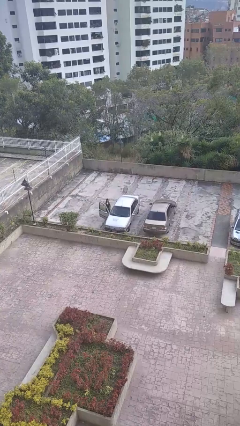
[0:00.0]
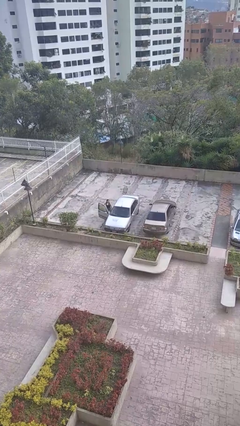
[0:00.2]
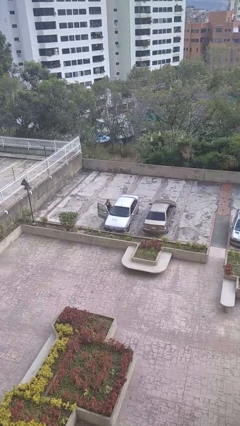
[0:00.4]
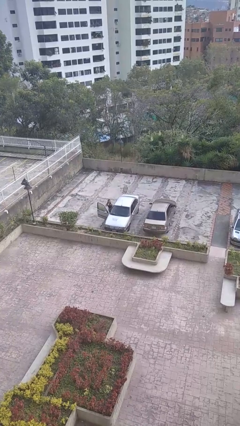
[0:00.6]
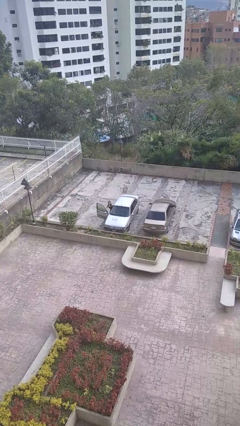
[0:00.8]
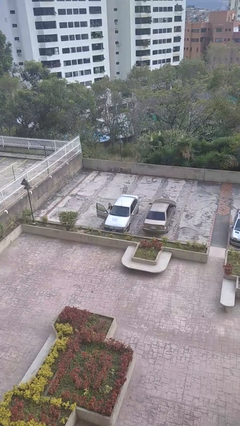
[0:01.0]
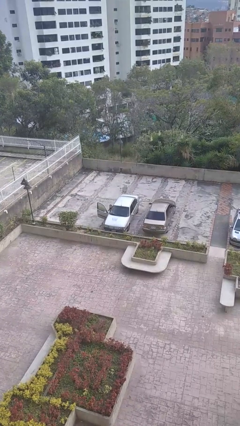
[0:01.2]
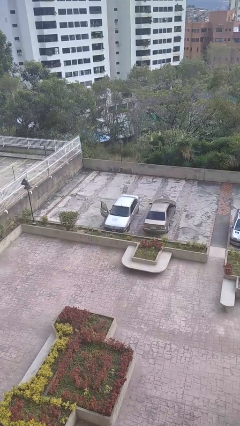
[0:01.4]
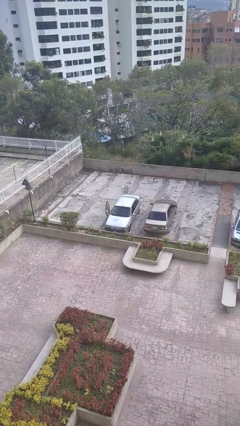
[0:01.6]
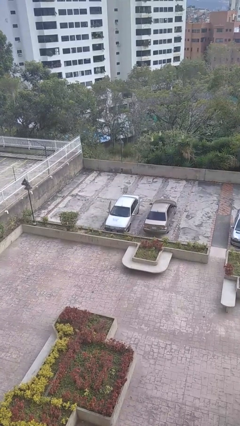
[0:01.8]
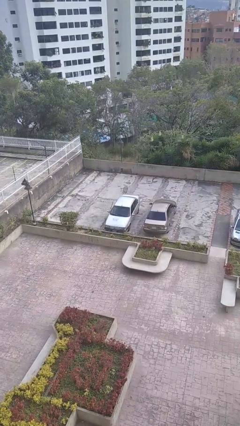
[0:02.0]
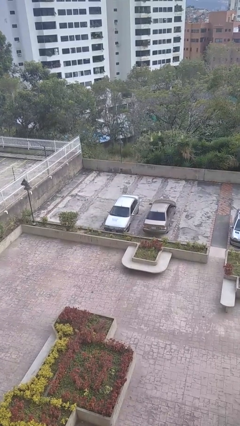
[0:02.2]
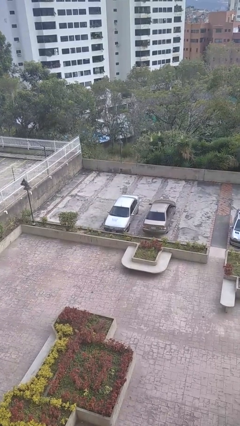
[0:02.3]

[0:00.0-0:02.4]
car picks up person

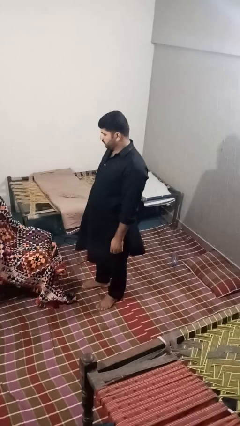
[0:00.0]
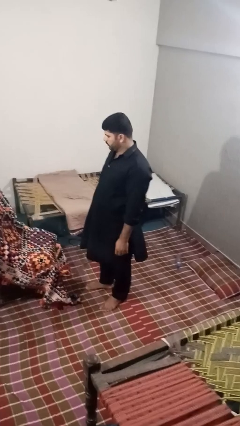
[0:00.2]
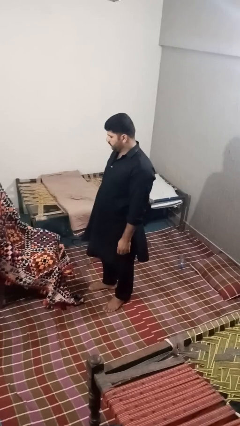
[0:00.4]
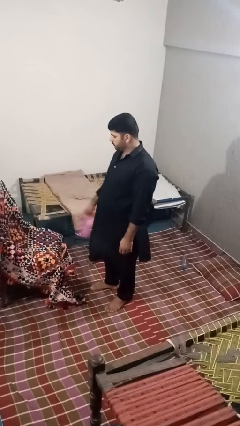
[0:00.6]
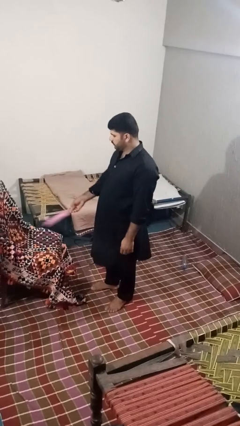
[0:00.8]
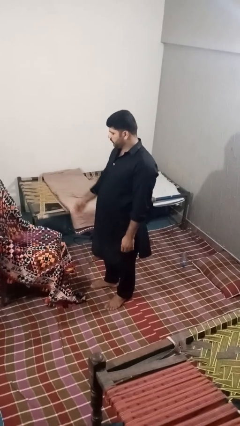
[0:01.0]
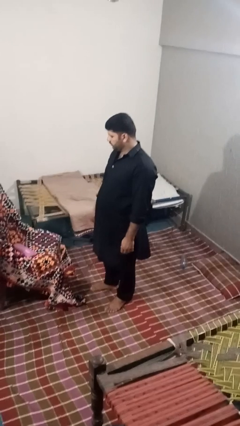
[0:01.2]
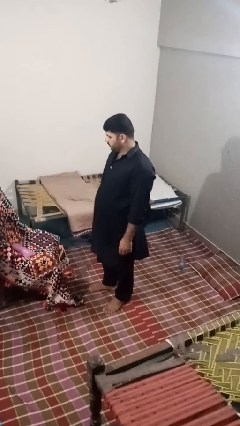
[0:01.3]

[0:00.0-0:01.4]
person puts down object on couch

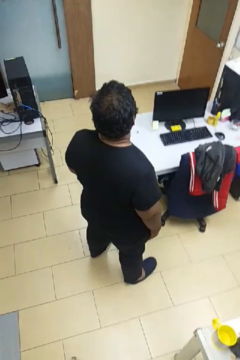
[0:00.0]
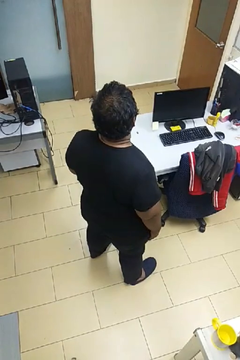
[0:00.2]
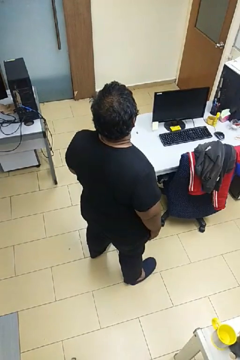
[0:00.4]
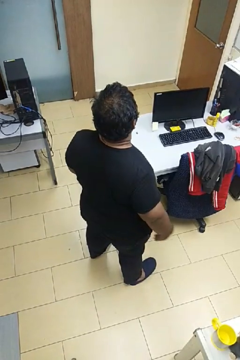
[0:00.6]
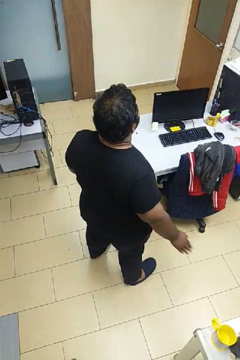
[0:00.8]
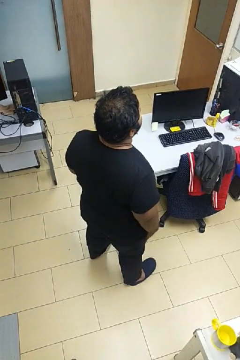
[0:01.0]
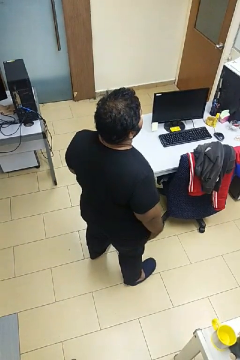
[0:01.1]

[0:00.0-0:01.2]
person slaps hands on thighs

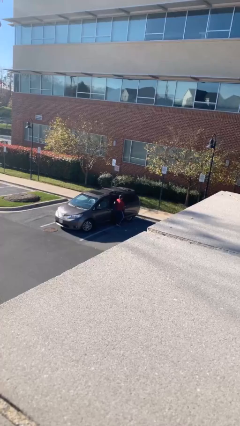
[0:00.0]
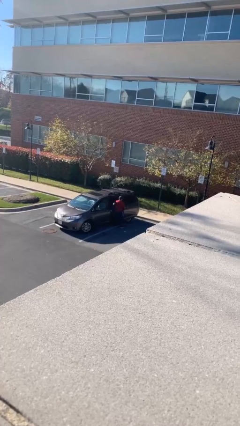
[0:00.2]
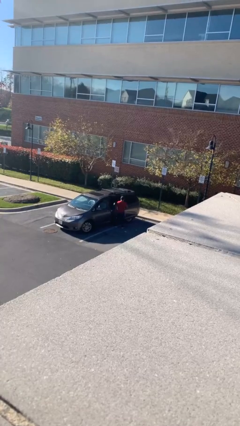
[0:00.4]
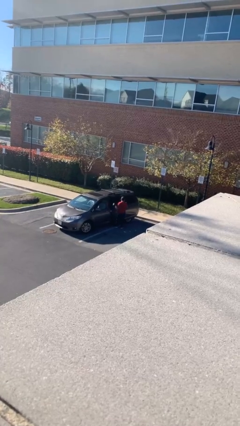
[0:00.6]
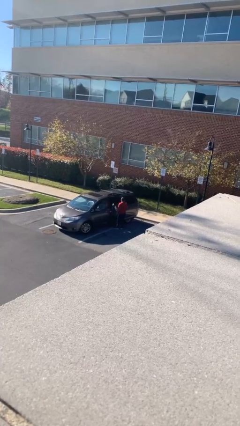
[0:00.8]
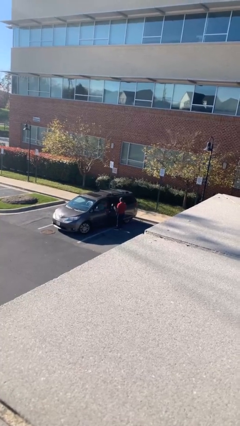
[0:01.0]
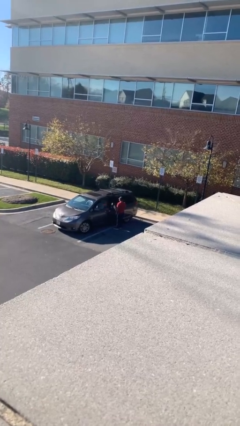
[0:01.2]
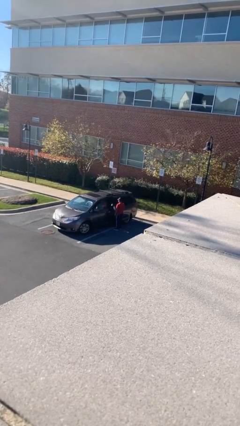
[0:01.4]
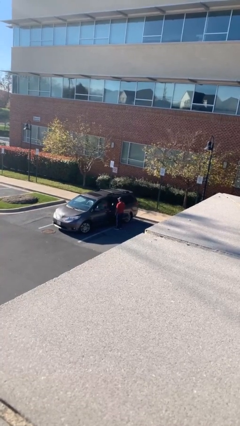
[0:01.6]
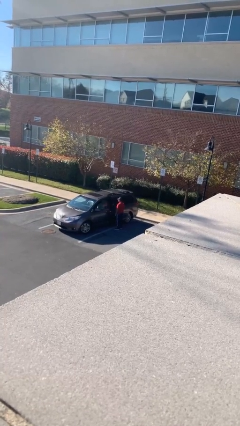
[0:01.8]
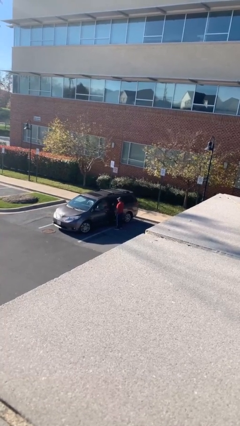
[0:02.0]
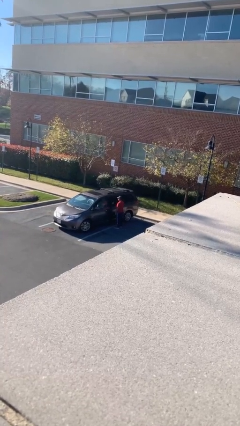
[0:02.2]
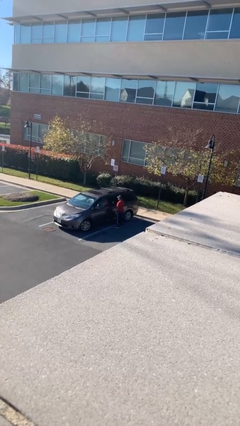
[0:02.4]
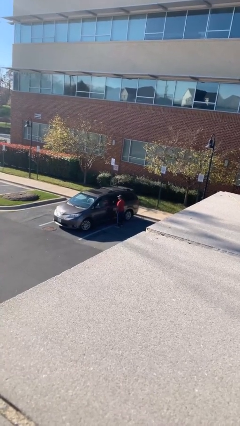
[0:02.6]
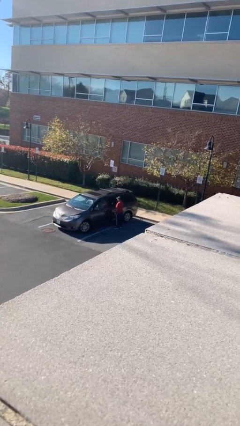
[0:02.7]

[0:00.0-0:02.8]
person closes car door

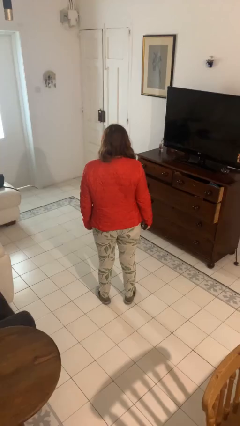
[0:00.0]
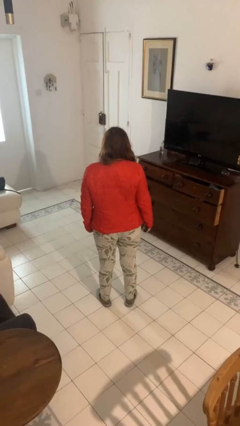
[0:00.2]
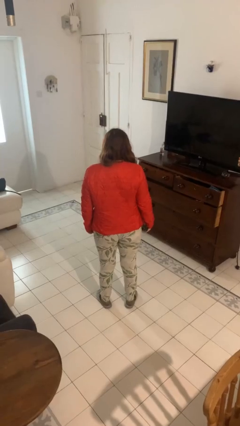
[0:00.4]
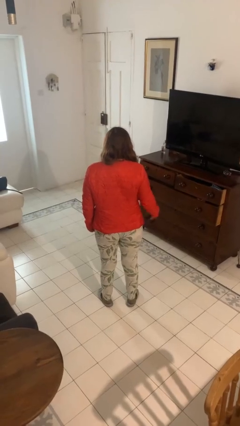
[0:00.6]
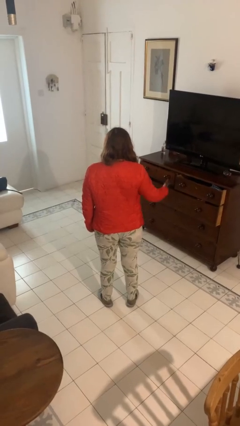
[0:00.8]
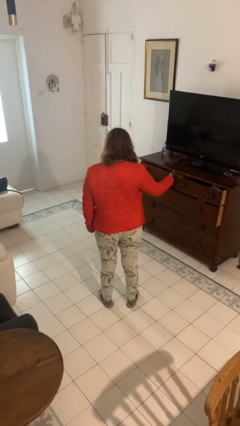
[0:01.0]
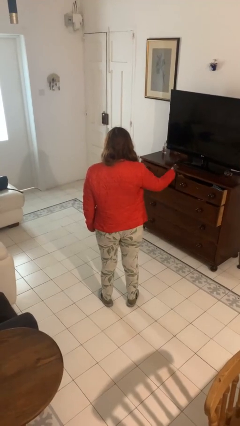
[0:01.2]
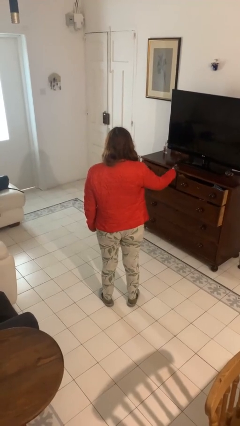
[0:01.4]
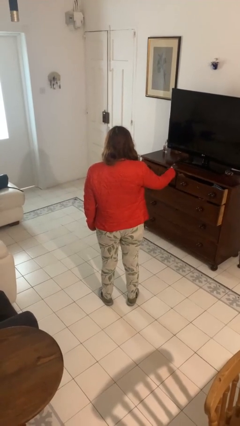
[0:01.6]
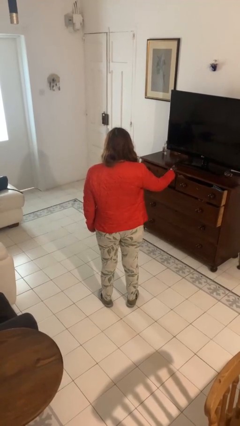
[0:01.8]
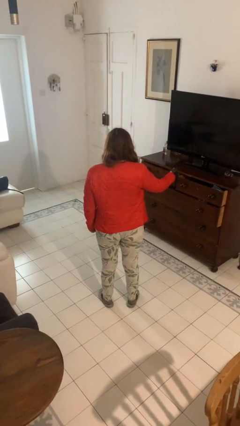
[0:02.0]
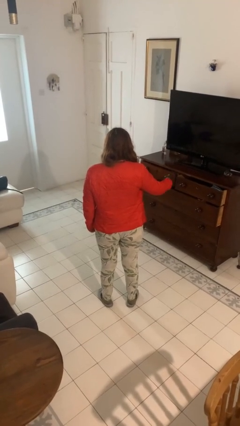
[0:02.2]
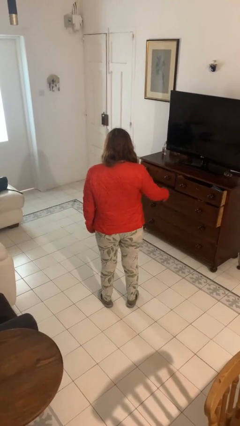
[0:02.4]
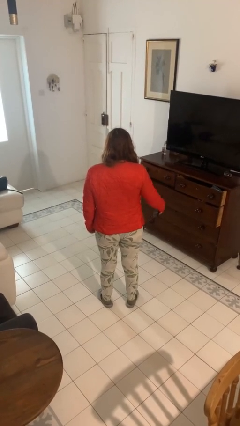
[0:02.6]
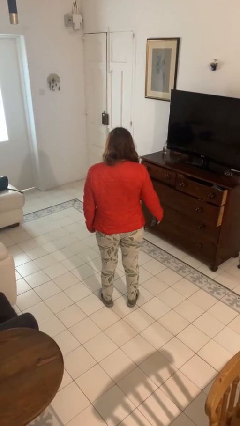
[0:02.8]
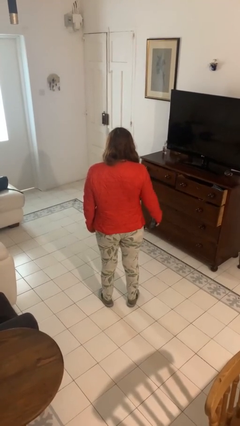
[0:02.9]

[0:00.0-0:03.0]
person uses television remote

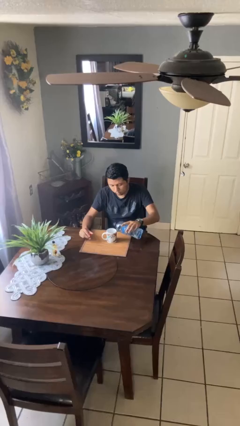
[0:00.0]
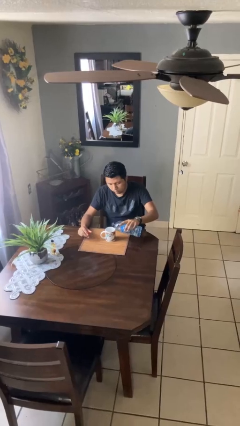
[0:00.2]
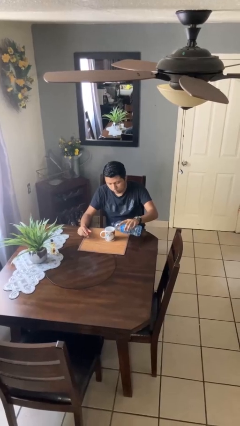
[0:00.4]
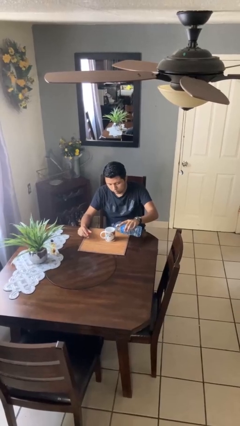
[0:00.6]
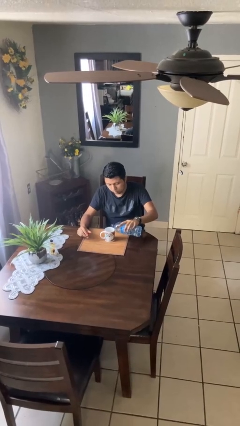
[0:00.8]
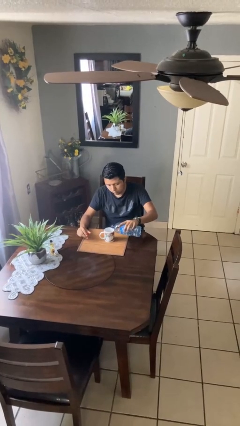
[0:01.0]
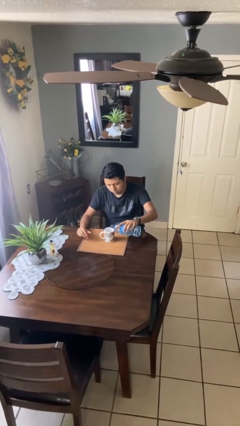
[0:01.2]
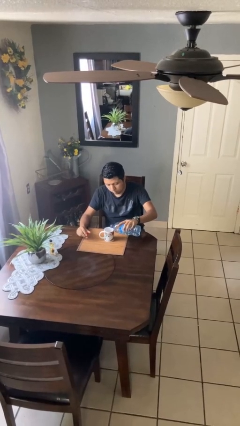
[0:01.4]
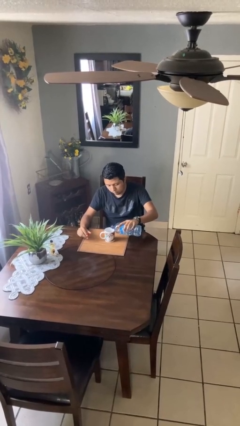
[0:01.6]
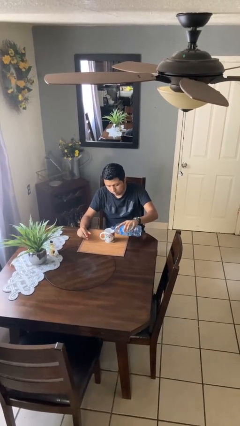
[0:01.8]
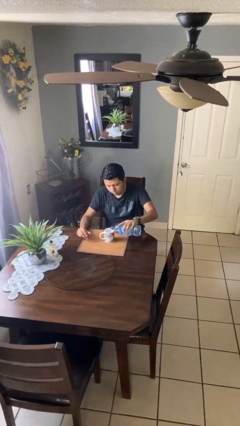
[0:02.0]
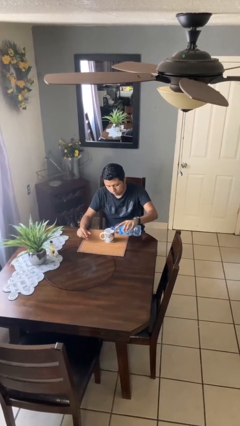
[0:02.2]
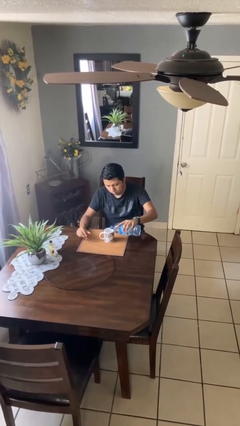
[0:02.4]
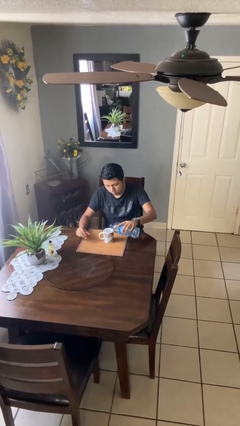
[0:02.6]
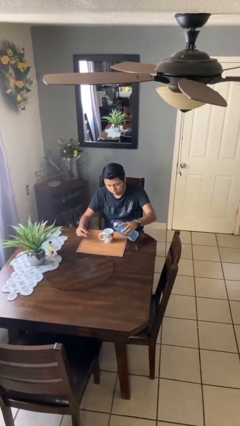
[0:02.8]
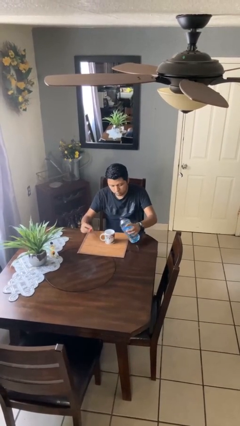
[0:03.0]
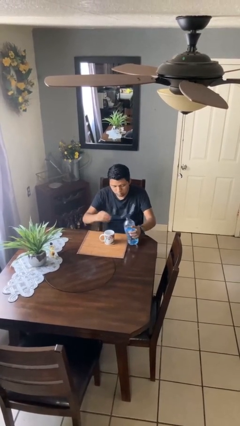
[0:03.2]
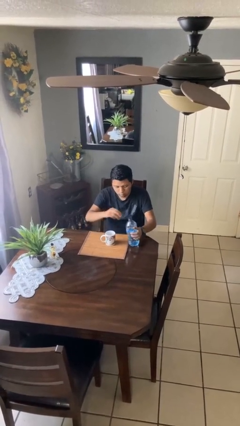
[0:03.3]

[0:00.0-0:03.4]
person pours liquid into cup

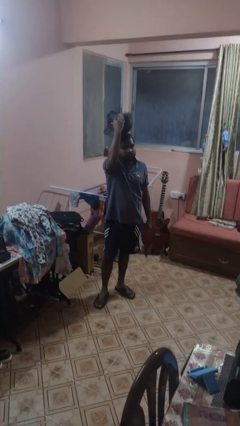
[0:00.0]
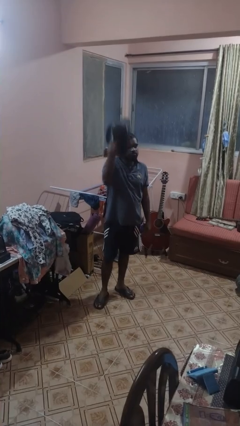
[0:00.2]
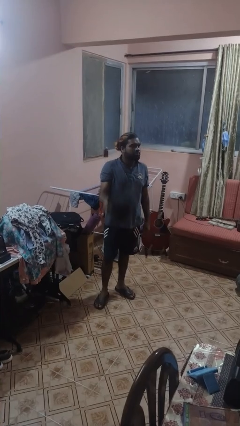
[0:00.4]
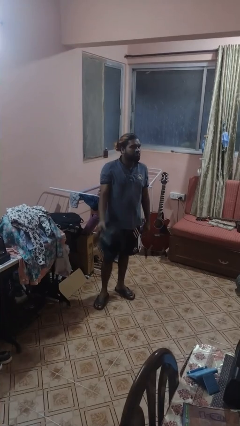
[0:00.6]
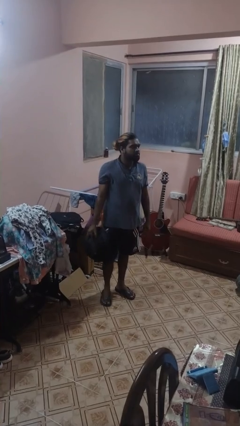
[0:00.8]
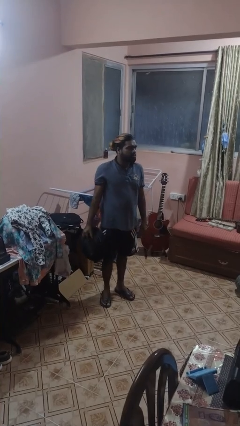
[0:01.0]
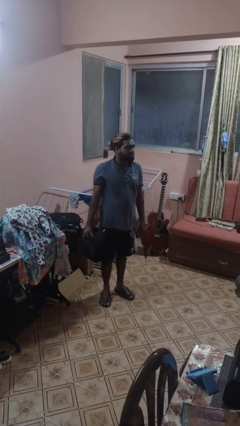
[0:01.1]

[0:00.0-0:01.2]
person takes off hat

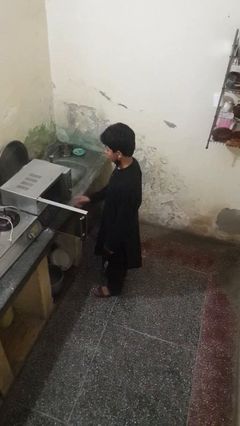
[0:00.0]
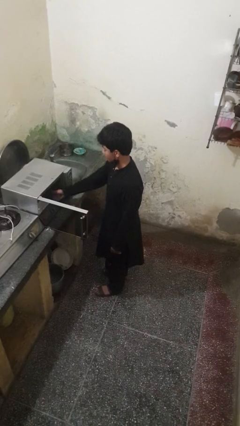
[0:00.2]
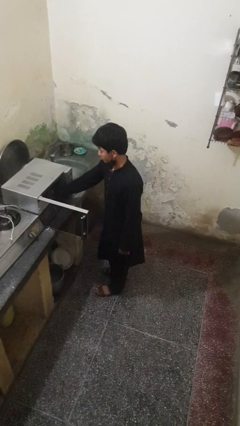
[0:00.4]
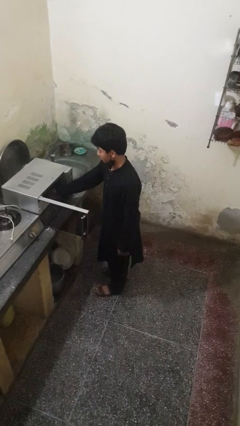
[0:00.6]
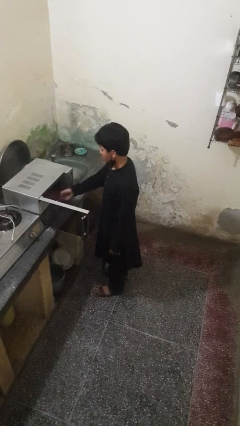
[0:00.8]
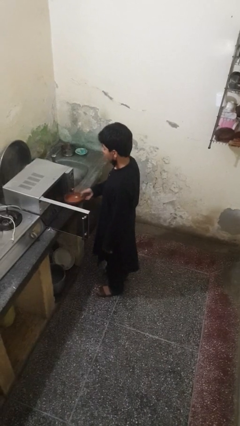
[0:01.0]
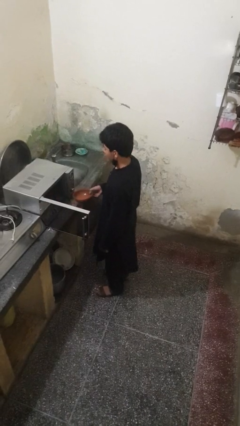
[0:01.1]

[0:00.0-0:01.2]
person takes object from microwave

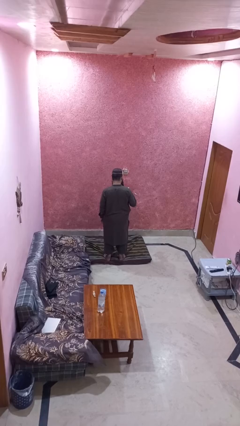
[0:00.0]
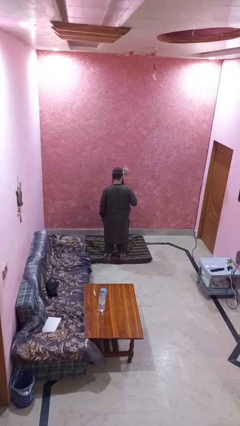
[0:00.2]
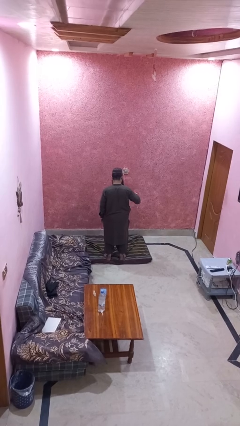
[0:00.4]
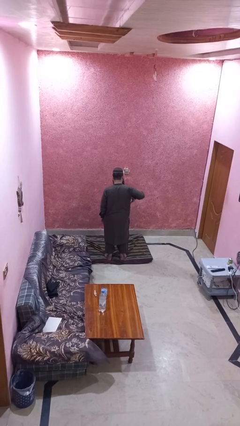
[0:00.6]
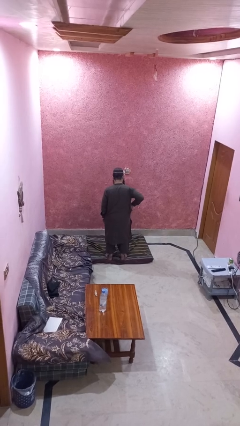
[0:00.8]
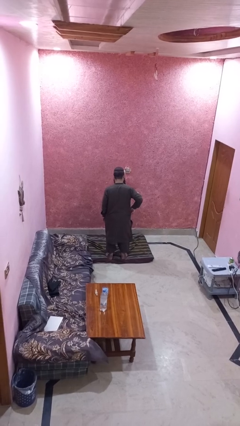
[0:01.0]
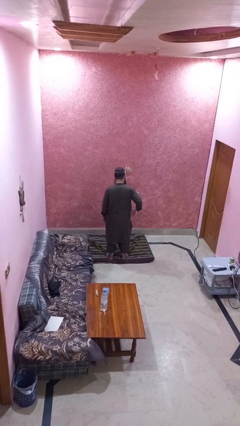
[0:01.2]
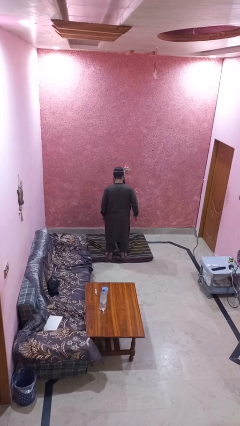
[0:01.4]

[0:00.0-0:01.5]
person puts phone into pocket
